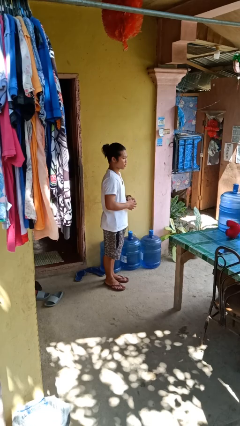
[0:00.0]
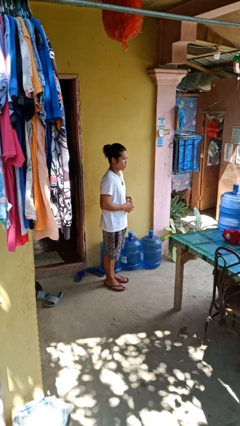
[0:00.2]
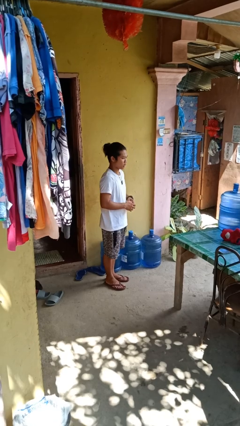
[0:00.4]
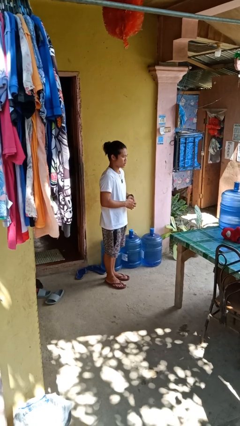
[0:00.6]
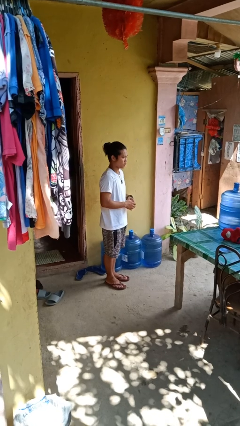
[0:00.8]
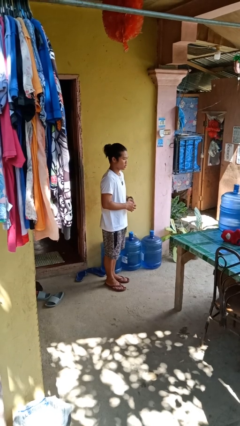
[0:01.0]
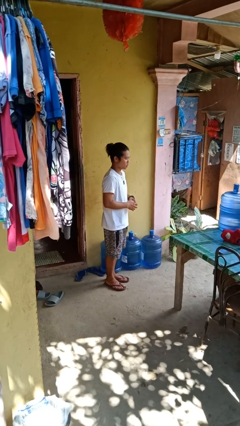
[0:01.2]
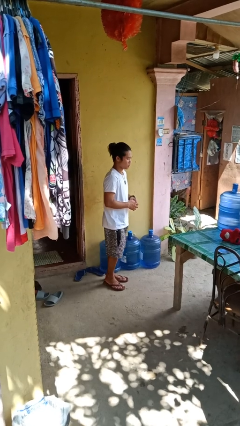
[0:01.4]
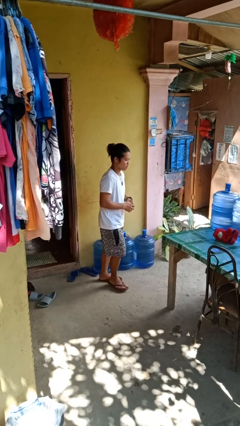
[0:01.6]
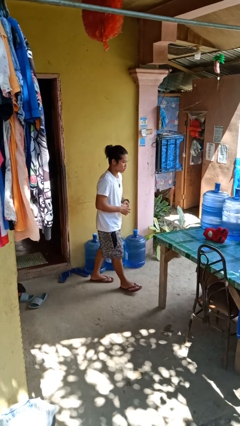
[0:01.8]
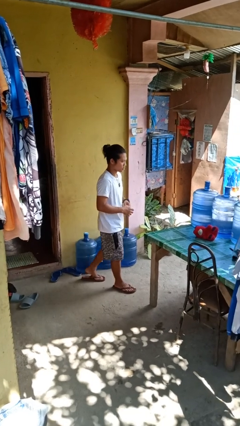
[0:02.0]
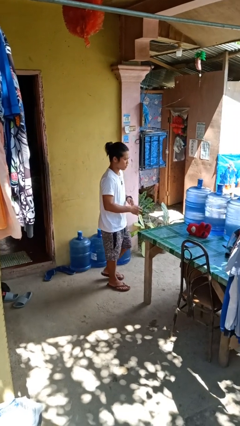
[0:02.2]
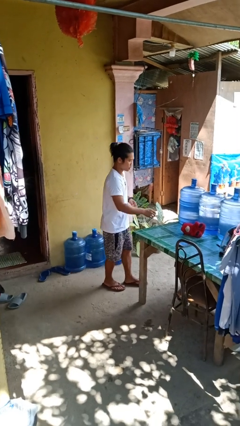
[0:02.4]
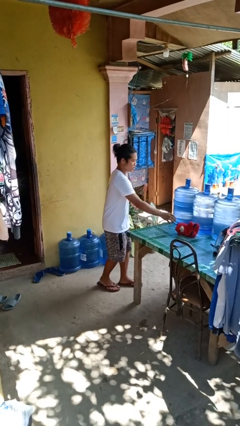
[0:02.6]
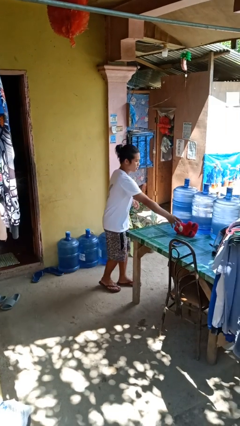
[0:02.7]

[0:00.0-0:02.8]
person throws object on table

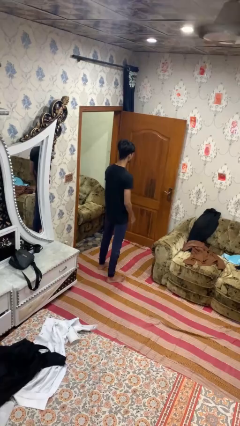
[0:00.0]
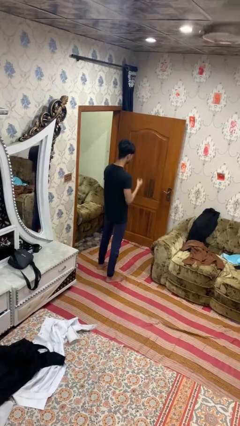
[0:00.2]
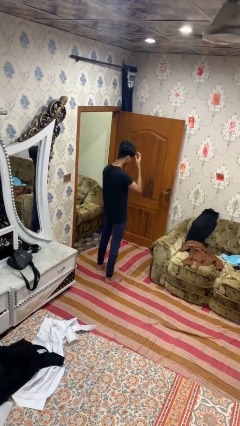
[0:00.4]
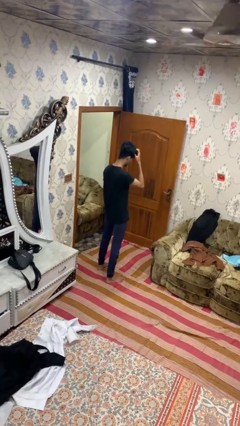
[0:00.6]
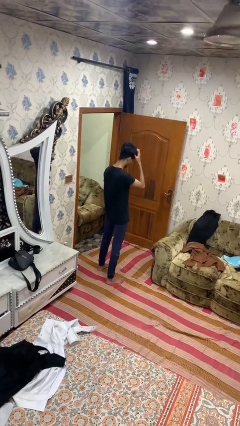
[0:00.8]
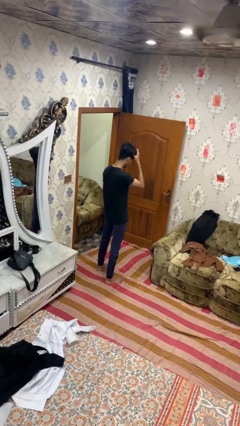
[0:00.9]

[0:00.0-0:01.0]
person strokes hair

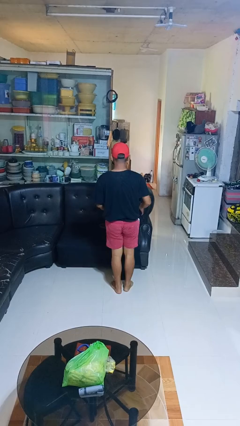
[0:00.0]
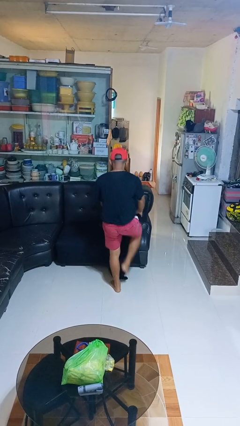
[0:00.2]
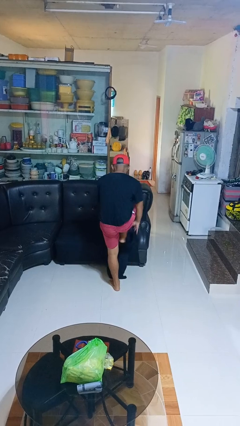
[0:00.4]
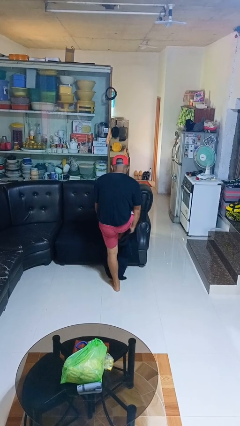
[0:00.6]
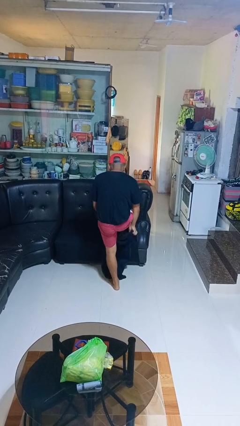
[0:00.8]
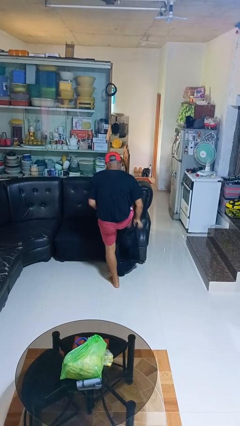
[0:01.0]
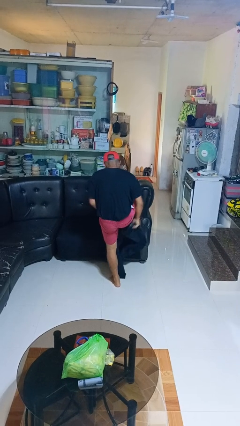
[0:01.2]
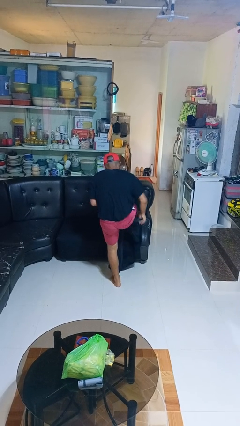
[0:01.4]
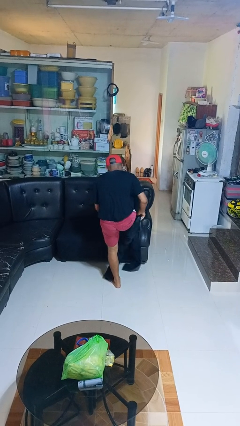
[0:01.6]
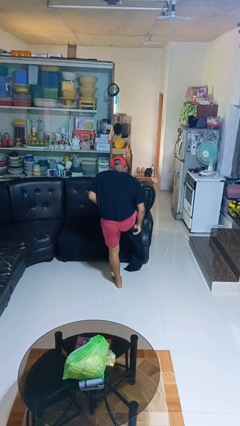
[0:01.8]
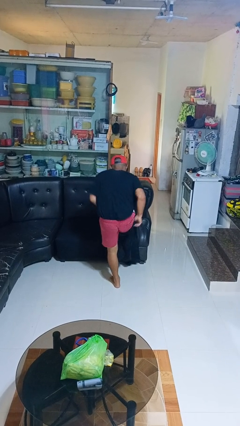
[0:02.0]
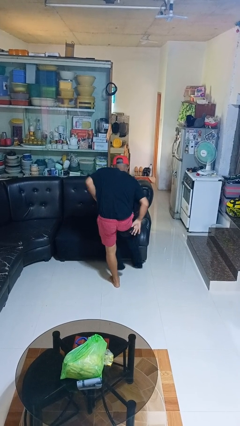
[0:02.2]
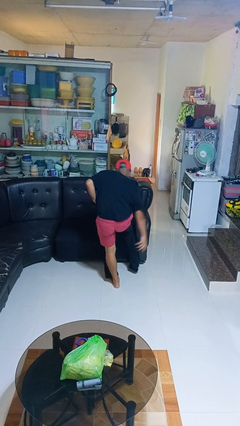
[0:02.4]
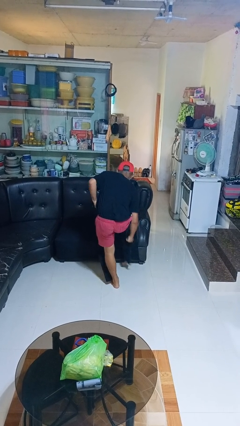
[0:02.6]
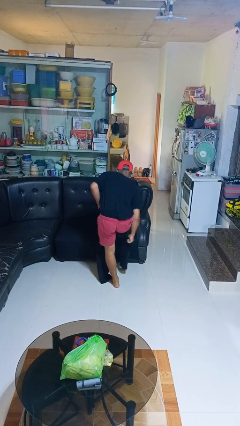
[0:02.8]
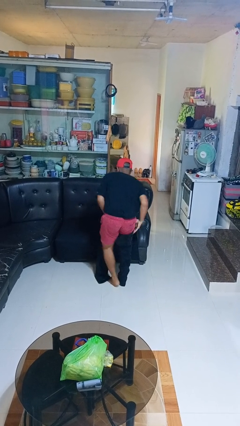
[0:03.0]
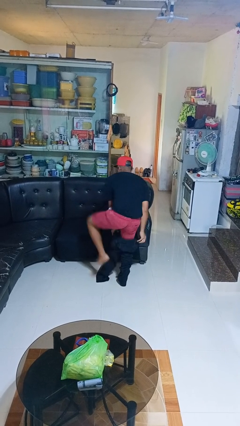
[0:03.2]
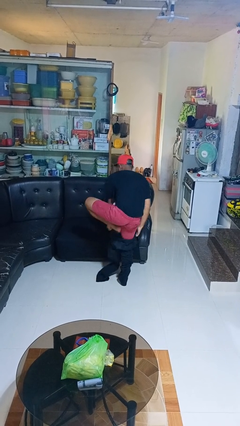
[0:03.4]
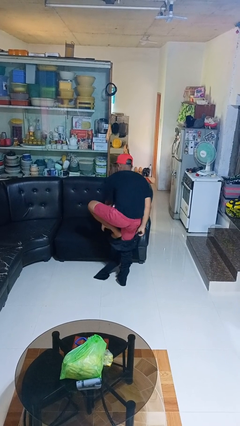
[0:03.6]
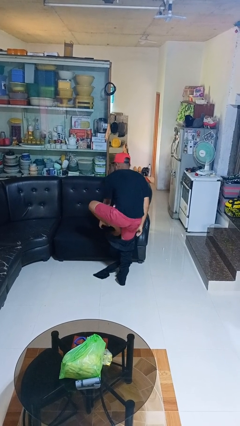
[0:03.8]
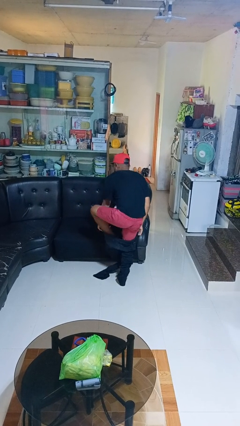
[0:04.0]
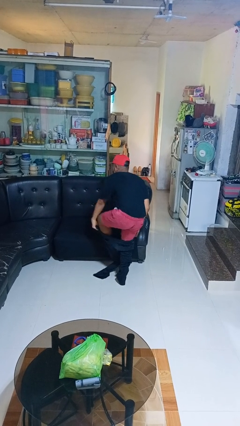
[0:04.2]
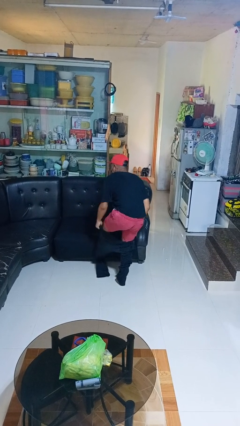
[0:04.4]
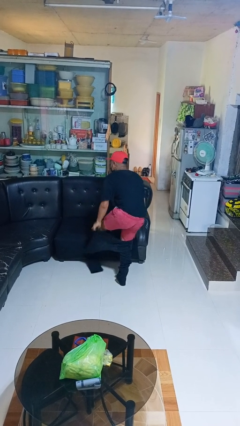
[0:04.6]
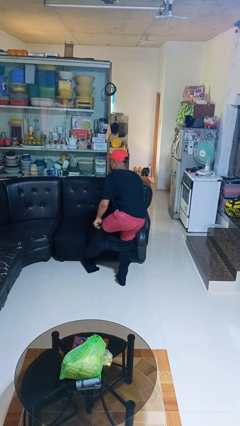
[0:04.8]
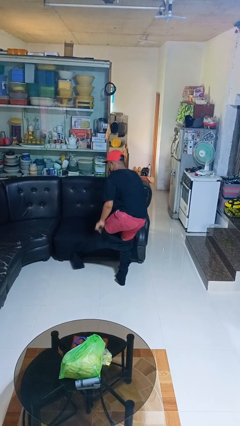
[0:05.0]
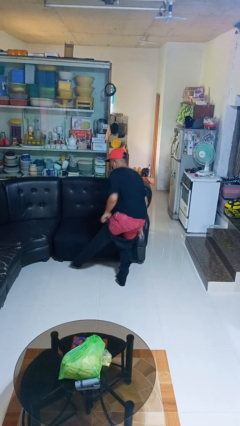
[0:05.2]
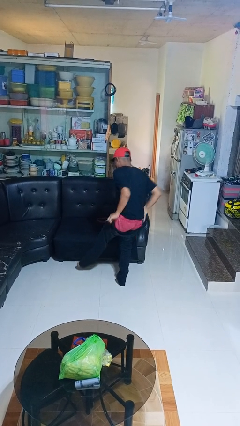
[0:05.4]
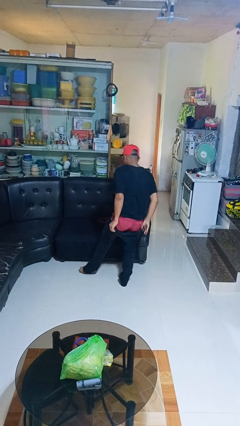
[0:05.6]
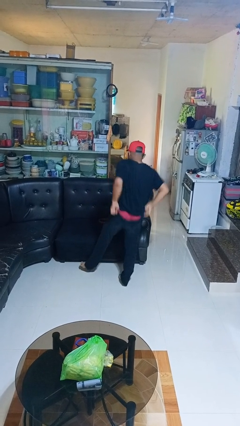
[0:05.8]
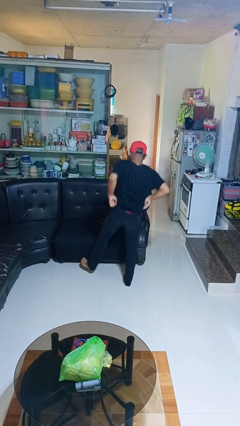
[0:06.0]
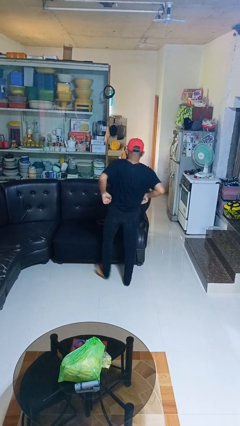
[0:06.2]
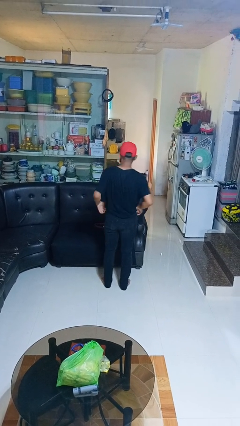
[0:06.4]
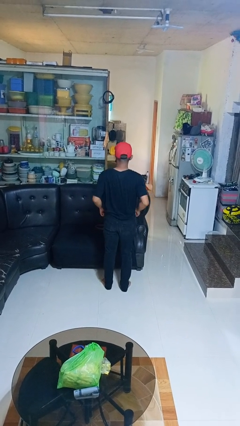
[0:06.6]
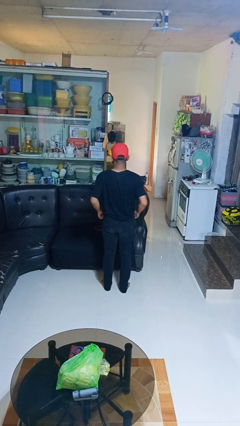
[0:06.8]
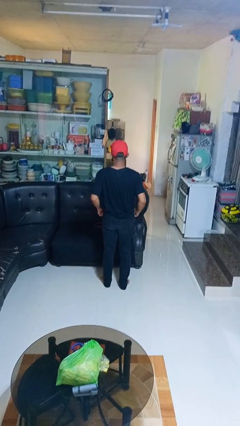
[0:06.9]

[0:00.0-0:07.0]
person puts on pants

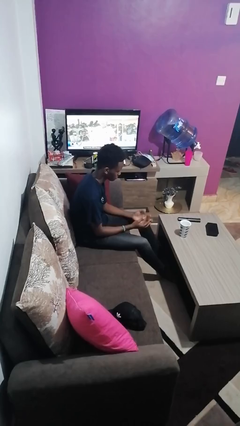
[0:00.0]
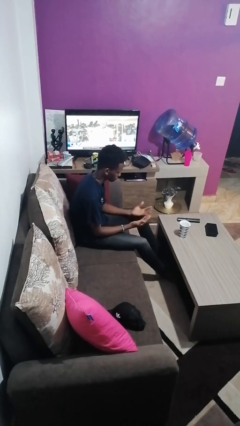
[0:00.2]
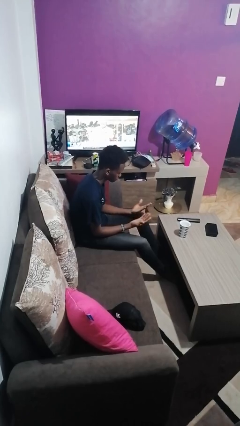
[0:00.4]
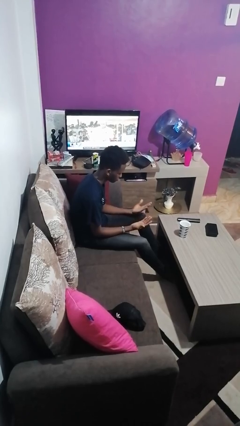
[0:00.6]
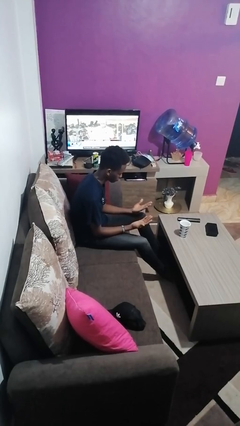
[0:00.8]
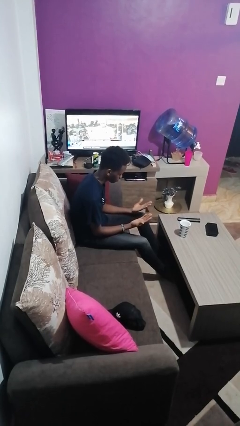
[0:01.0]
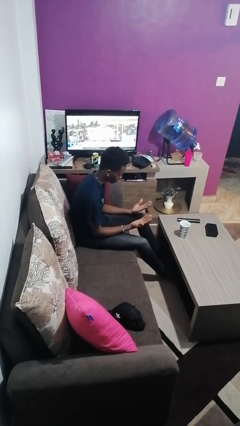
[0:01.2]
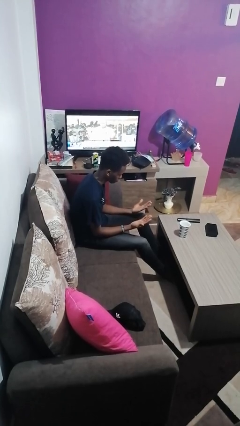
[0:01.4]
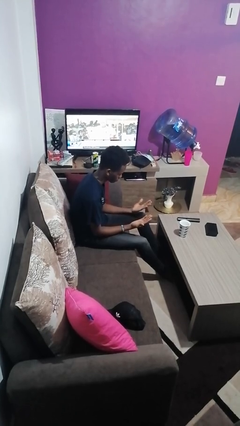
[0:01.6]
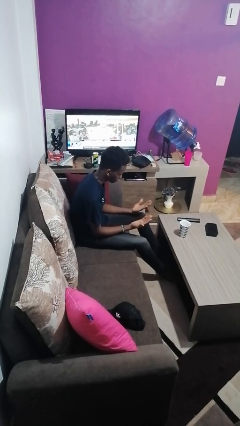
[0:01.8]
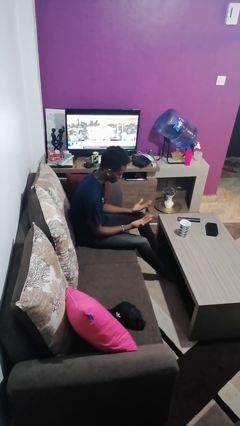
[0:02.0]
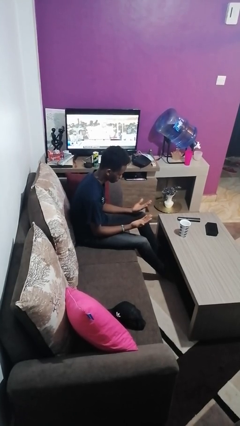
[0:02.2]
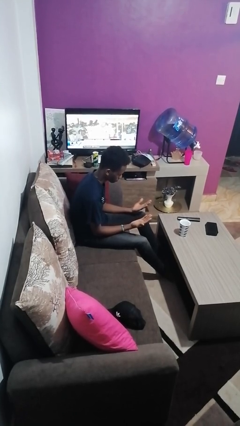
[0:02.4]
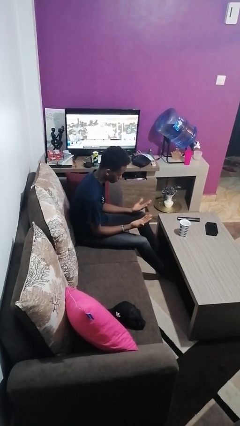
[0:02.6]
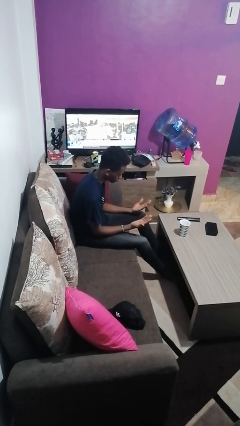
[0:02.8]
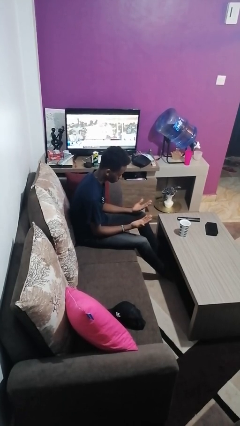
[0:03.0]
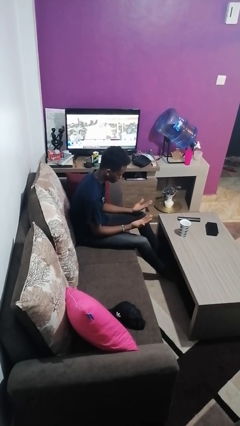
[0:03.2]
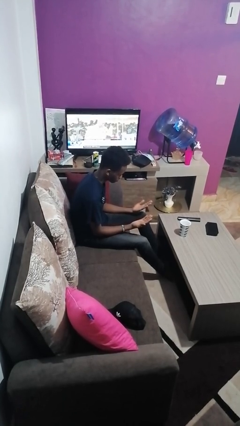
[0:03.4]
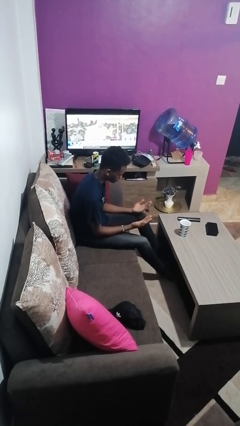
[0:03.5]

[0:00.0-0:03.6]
person looks at hands in lap

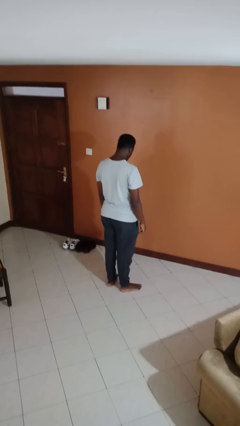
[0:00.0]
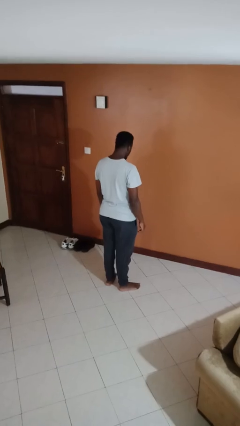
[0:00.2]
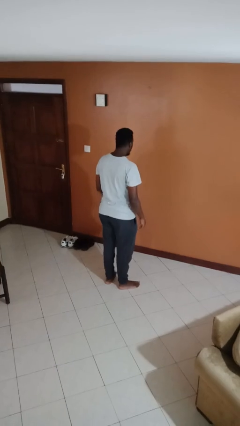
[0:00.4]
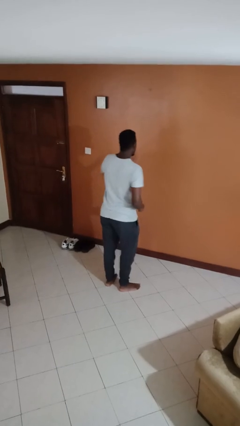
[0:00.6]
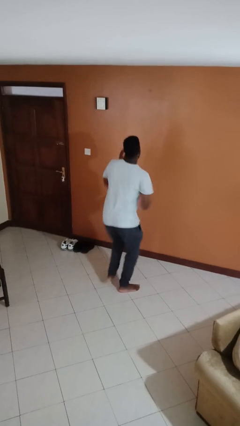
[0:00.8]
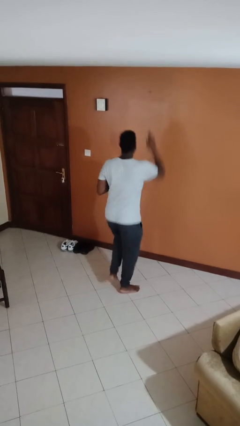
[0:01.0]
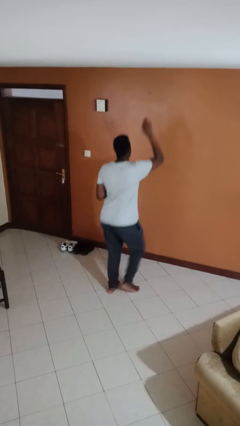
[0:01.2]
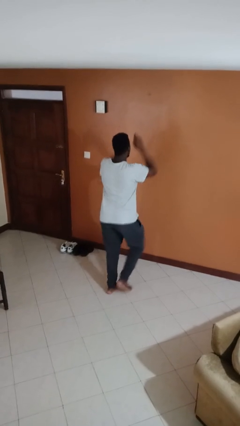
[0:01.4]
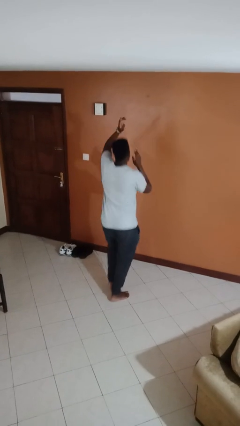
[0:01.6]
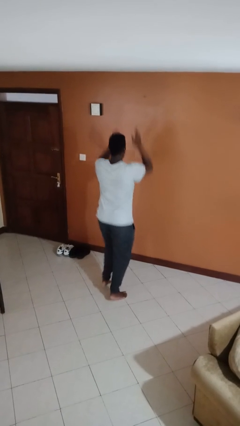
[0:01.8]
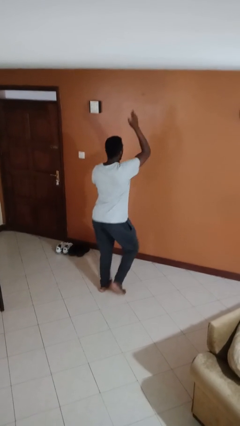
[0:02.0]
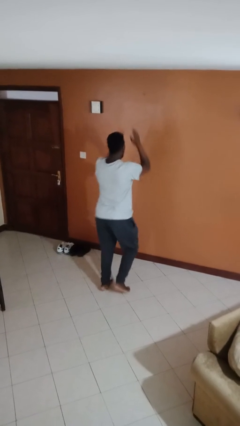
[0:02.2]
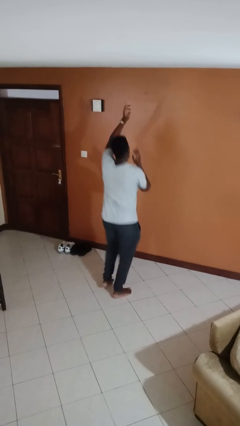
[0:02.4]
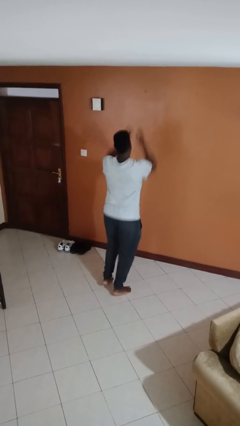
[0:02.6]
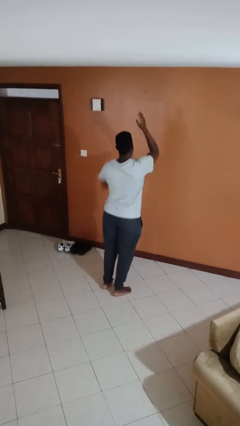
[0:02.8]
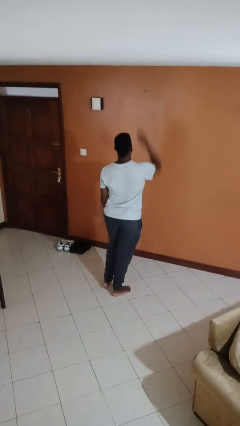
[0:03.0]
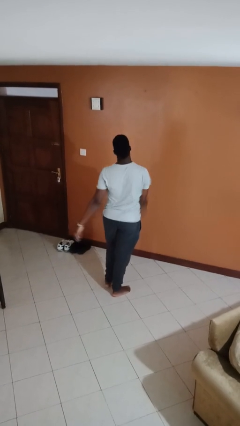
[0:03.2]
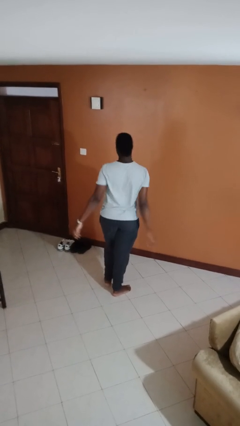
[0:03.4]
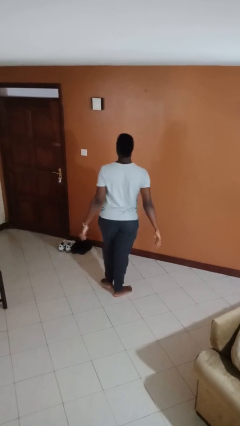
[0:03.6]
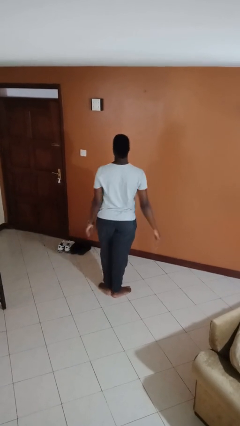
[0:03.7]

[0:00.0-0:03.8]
person dances in place
